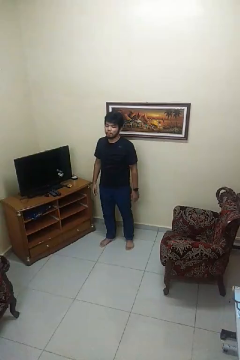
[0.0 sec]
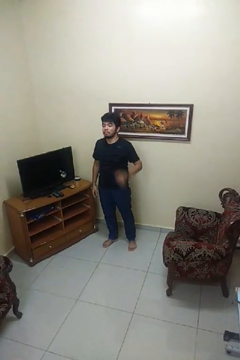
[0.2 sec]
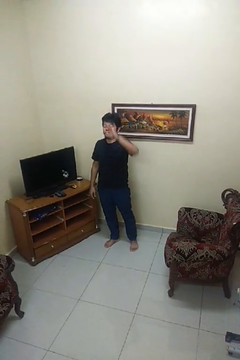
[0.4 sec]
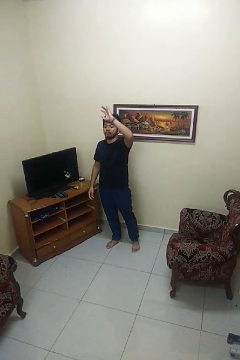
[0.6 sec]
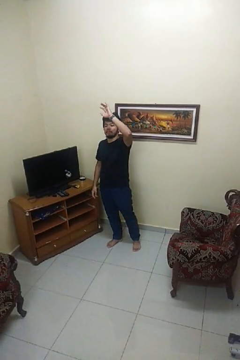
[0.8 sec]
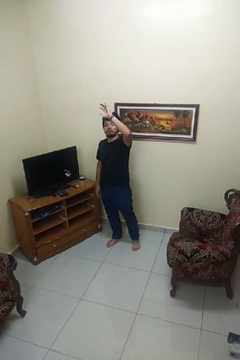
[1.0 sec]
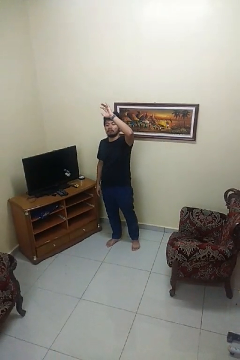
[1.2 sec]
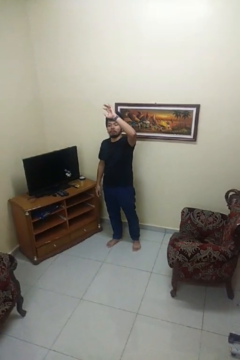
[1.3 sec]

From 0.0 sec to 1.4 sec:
person gestures raise hand

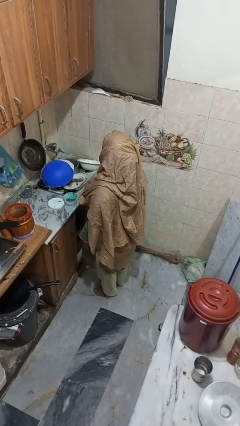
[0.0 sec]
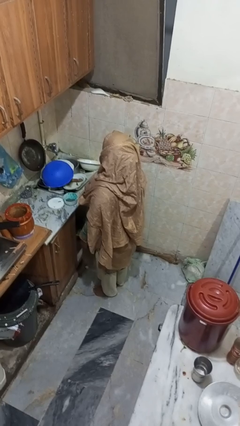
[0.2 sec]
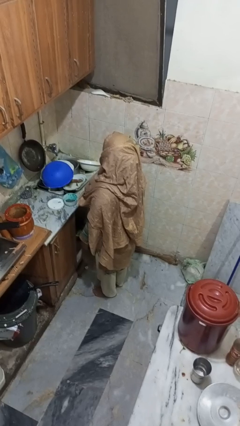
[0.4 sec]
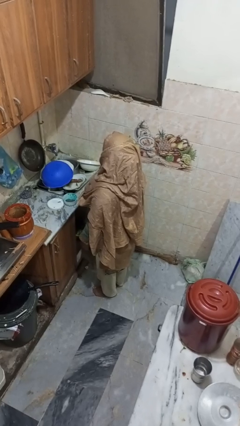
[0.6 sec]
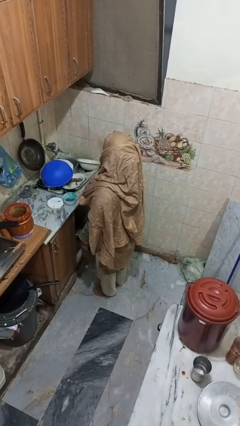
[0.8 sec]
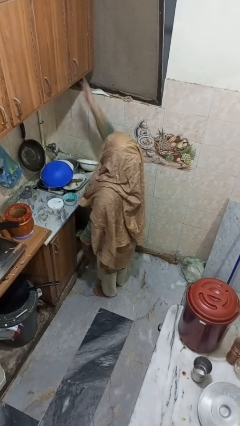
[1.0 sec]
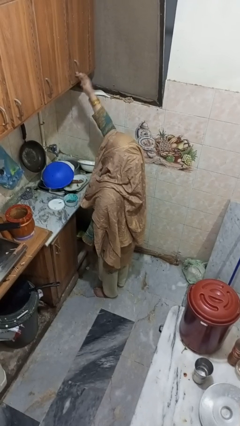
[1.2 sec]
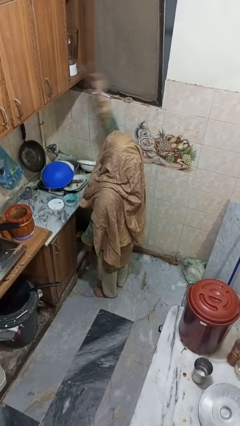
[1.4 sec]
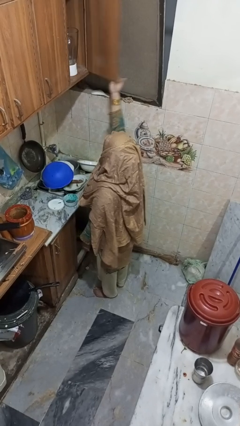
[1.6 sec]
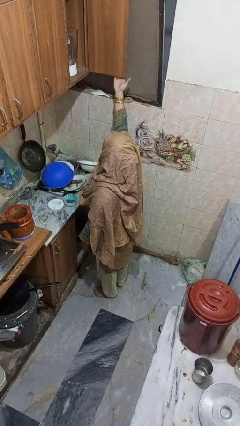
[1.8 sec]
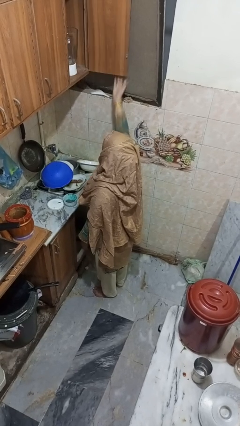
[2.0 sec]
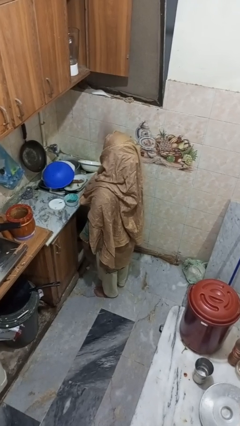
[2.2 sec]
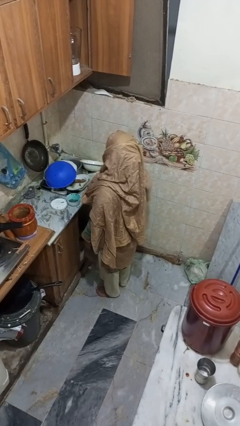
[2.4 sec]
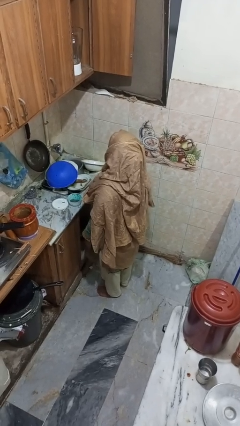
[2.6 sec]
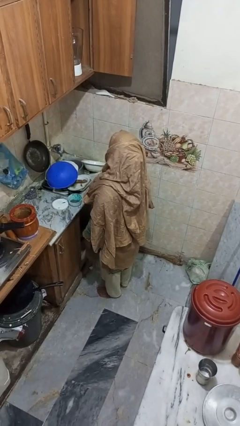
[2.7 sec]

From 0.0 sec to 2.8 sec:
person opens cabinet

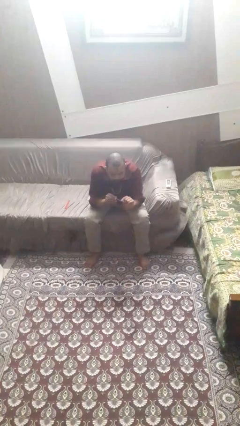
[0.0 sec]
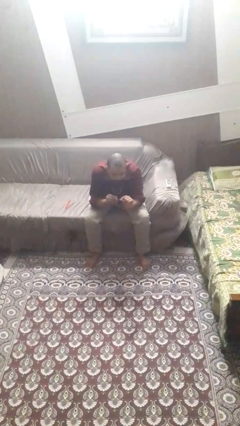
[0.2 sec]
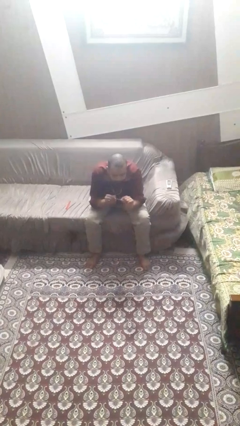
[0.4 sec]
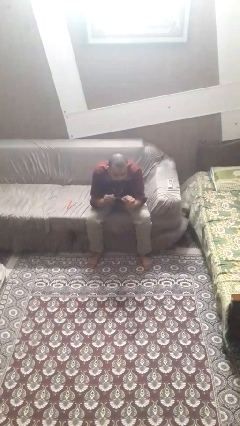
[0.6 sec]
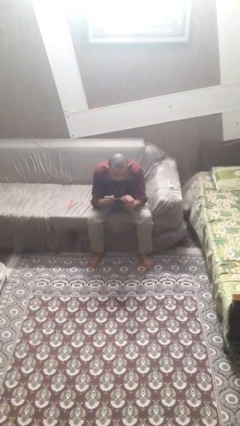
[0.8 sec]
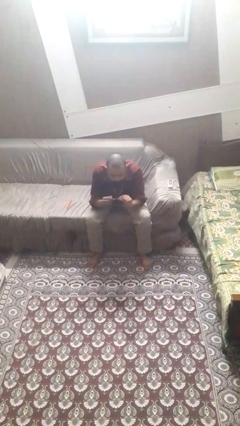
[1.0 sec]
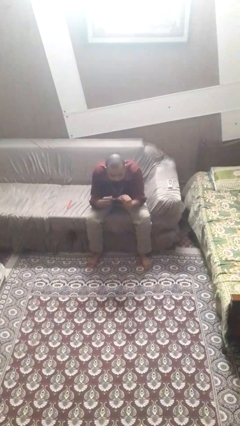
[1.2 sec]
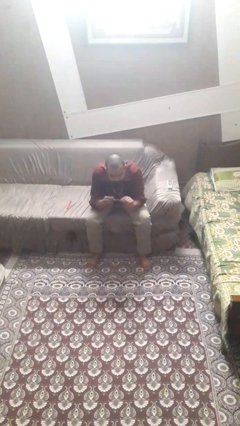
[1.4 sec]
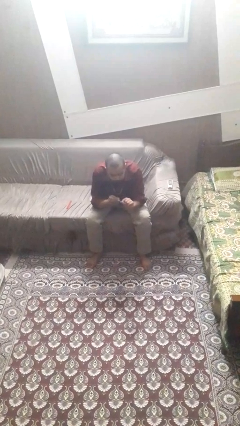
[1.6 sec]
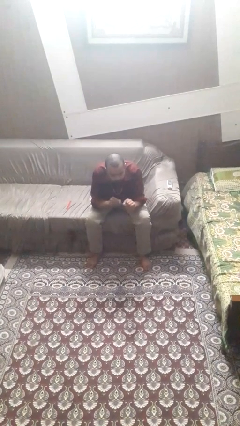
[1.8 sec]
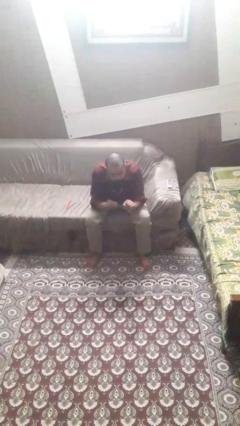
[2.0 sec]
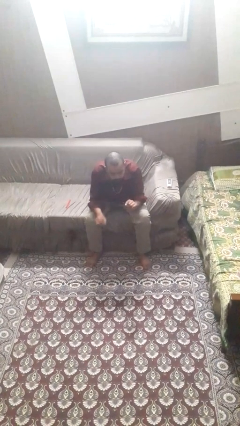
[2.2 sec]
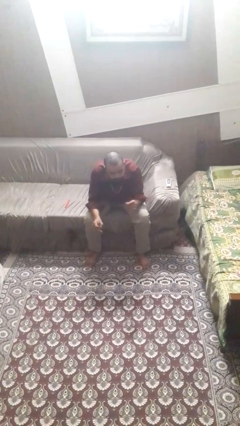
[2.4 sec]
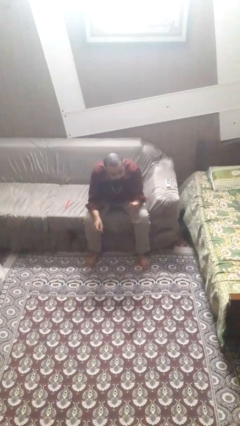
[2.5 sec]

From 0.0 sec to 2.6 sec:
person files fingernails

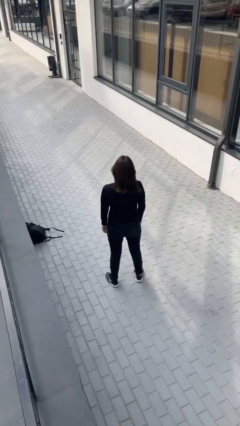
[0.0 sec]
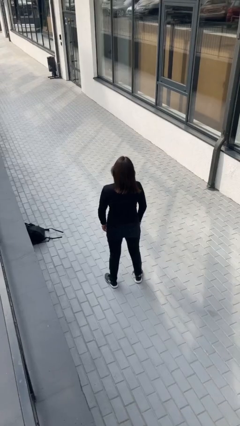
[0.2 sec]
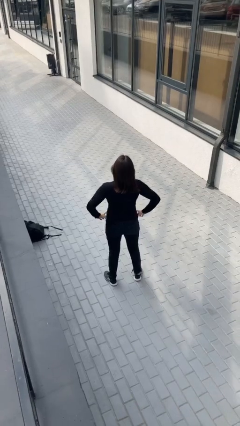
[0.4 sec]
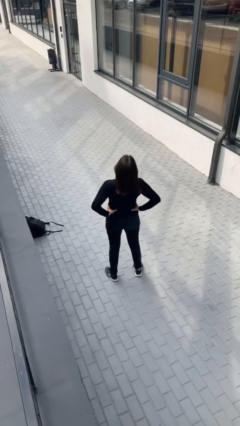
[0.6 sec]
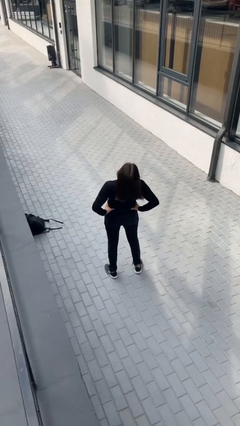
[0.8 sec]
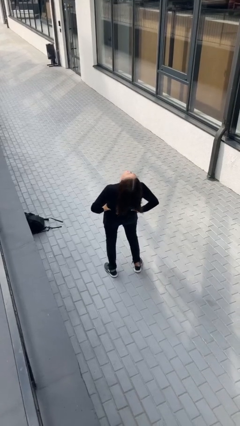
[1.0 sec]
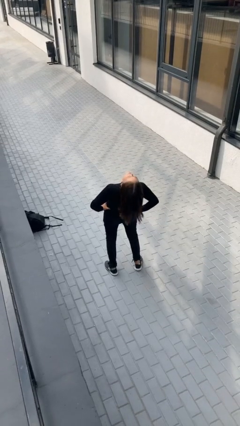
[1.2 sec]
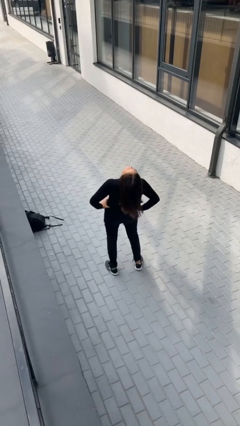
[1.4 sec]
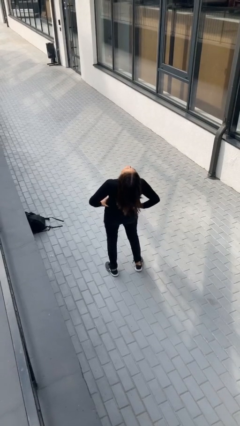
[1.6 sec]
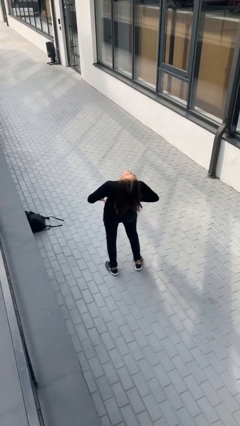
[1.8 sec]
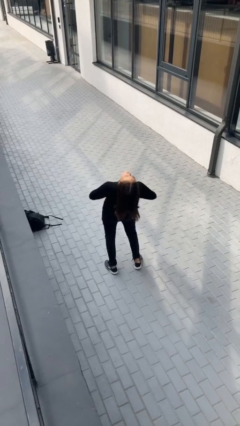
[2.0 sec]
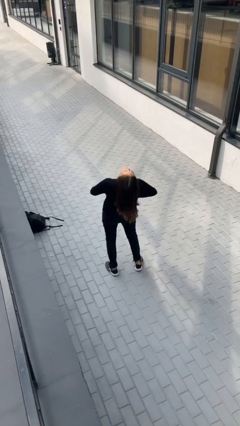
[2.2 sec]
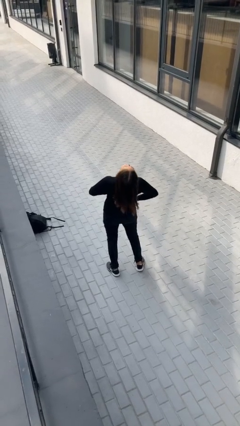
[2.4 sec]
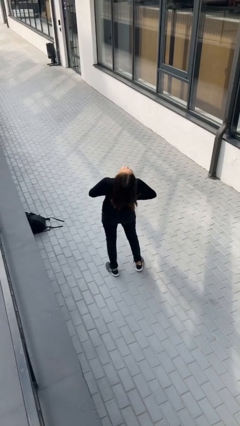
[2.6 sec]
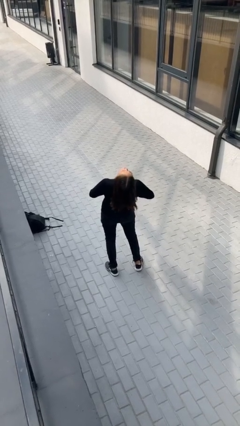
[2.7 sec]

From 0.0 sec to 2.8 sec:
person stretches back

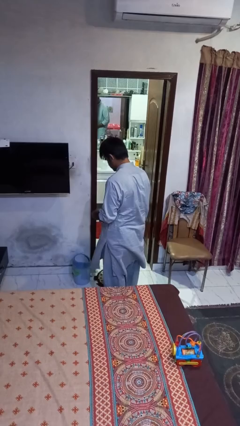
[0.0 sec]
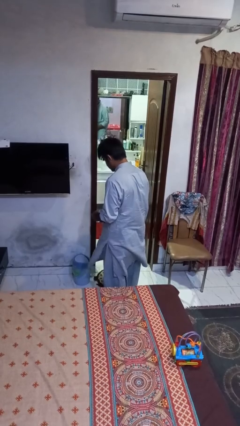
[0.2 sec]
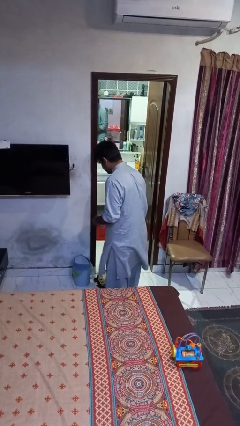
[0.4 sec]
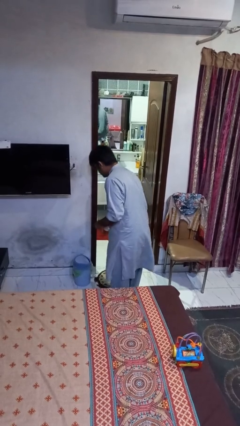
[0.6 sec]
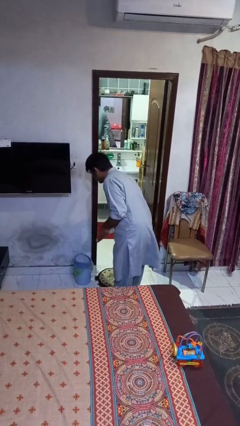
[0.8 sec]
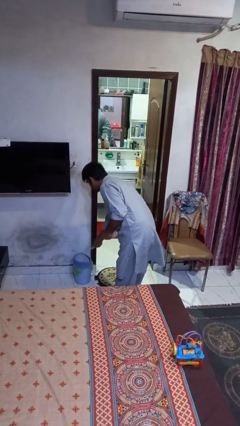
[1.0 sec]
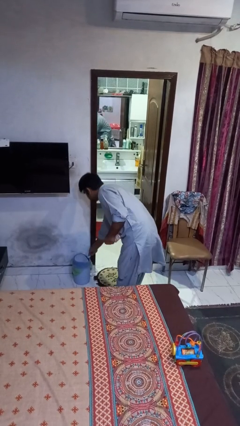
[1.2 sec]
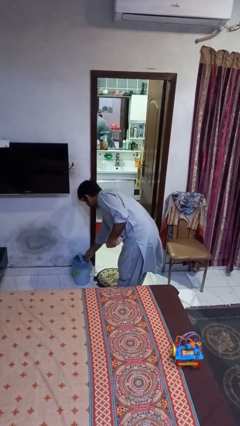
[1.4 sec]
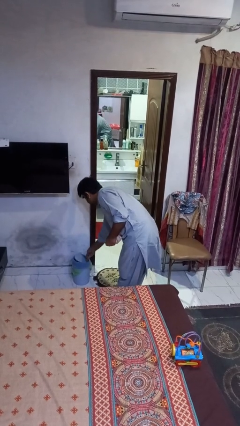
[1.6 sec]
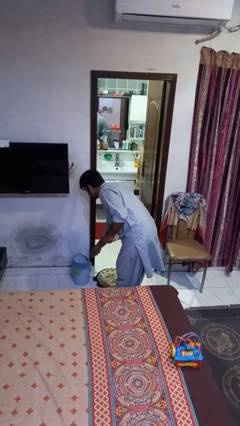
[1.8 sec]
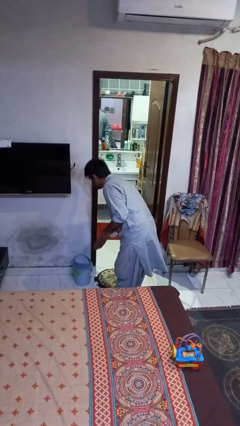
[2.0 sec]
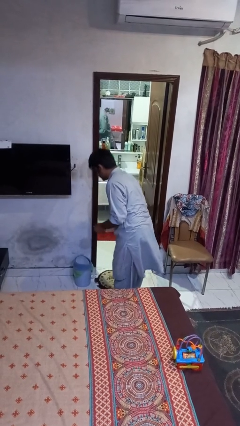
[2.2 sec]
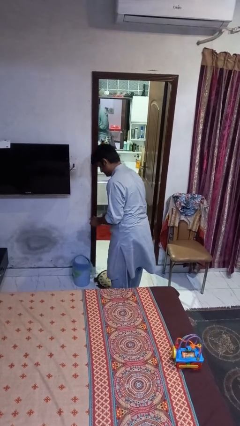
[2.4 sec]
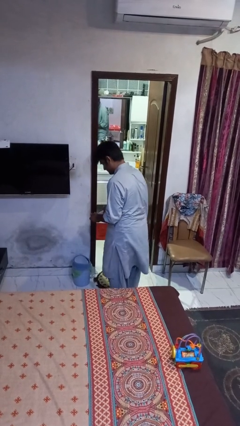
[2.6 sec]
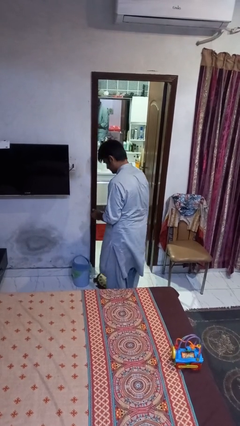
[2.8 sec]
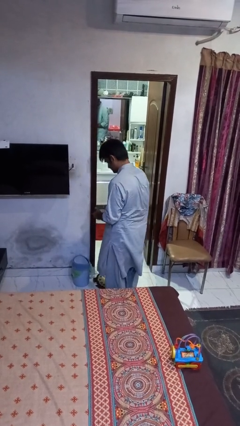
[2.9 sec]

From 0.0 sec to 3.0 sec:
person discards trash

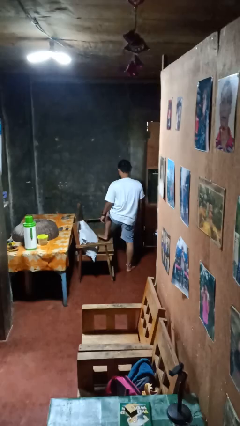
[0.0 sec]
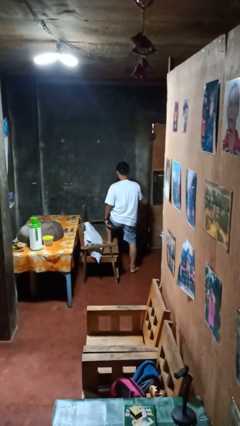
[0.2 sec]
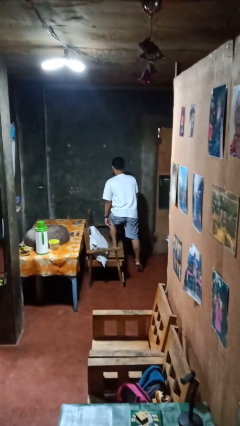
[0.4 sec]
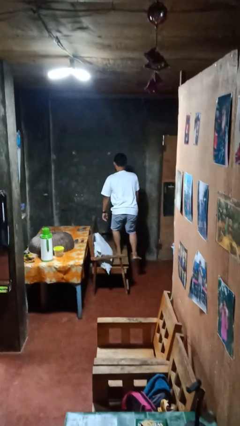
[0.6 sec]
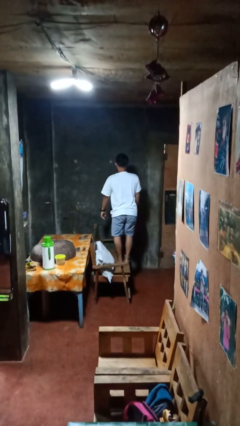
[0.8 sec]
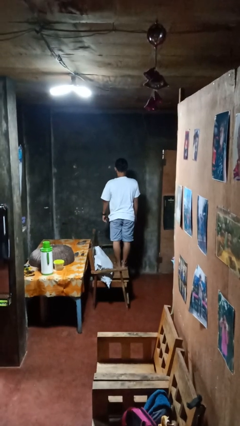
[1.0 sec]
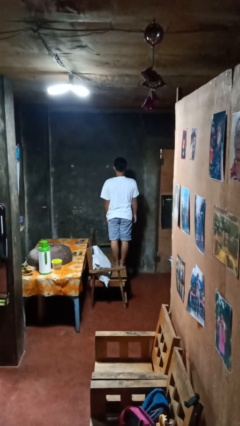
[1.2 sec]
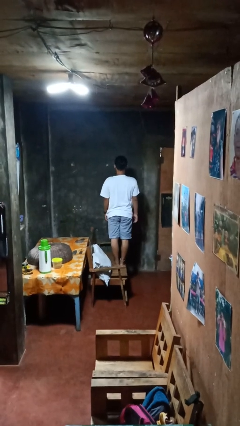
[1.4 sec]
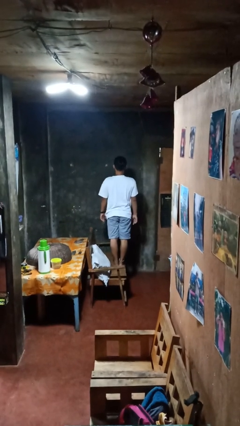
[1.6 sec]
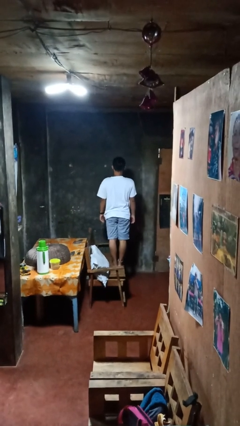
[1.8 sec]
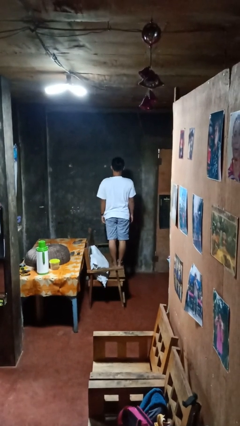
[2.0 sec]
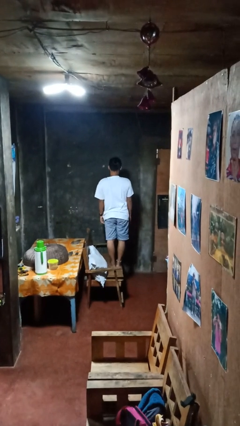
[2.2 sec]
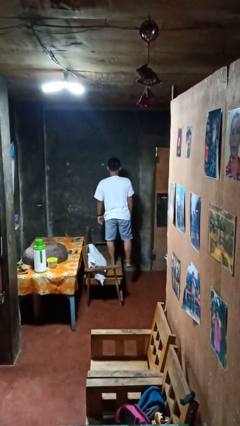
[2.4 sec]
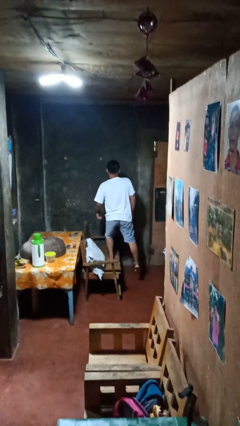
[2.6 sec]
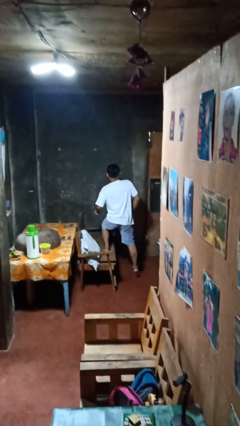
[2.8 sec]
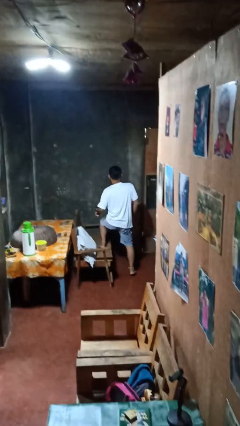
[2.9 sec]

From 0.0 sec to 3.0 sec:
person climbs on couch

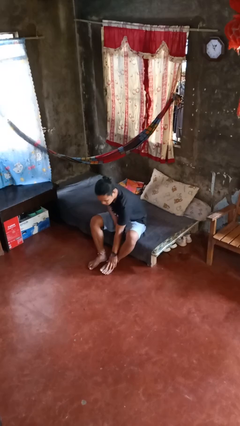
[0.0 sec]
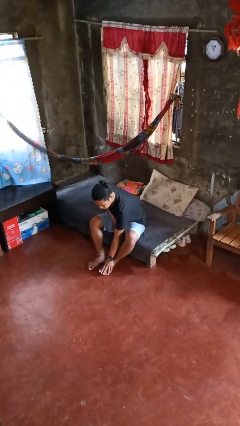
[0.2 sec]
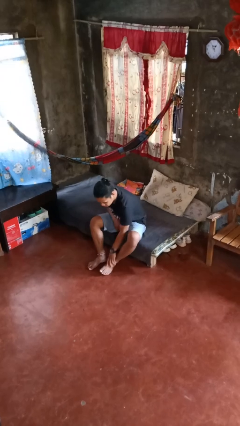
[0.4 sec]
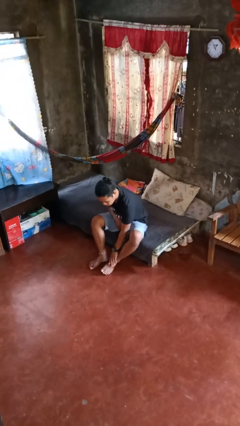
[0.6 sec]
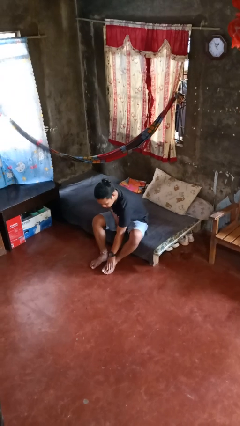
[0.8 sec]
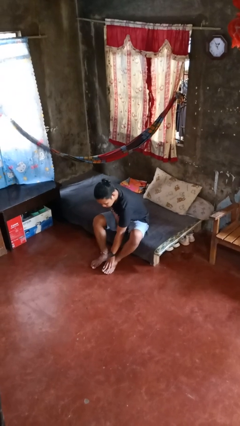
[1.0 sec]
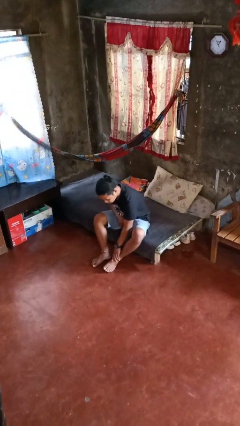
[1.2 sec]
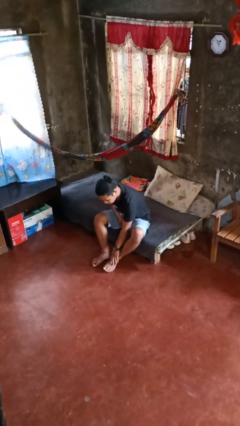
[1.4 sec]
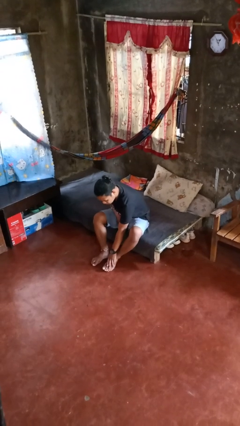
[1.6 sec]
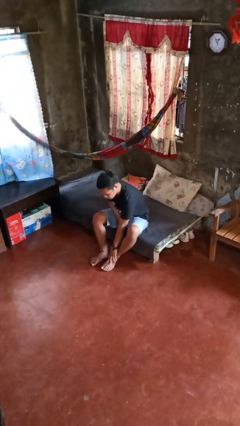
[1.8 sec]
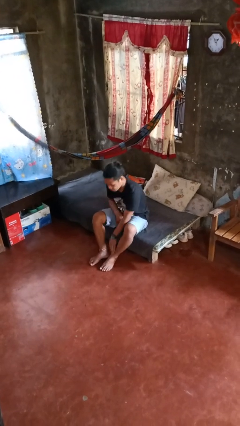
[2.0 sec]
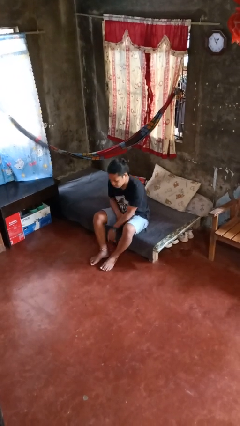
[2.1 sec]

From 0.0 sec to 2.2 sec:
person rubs foot
